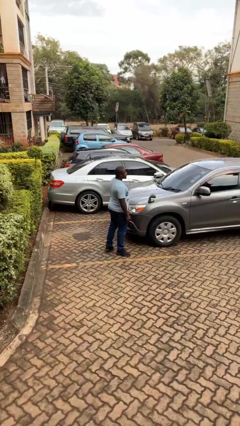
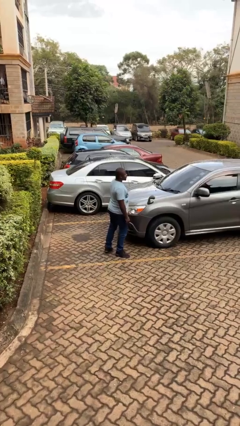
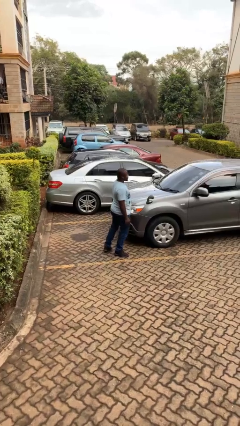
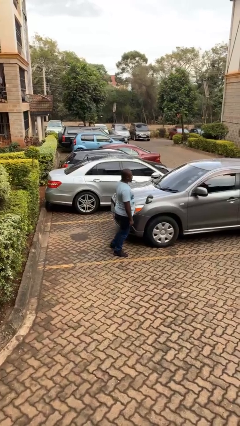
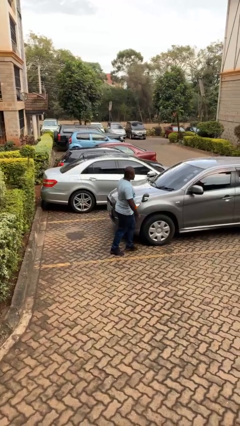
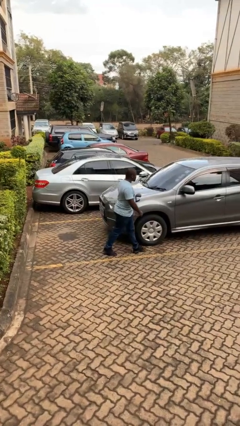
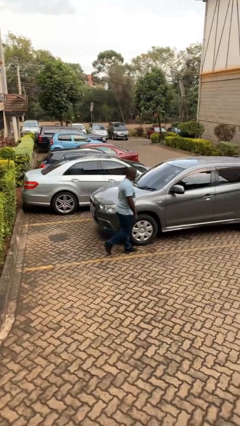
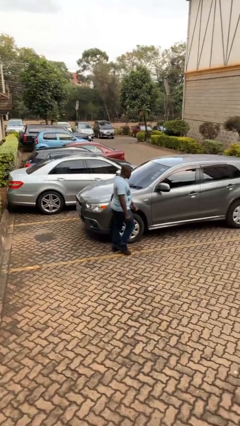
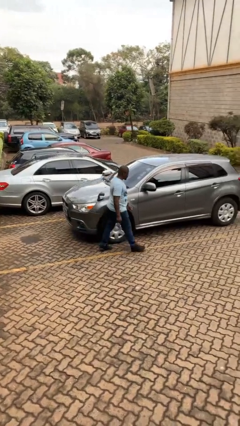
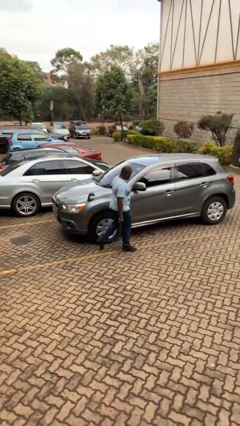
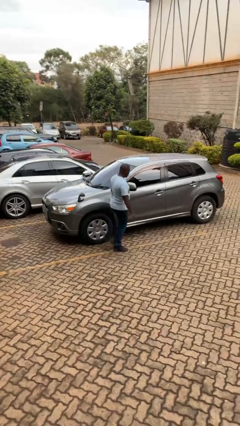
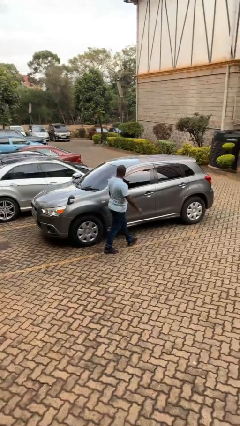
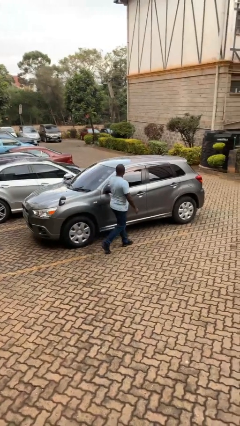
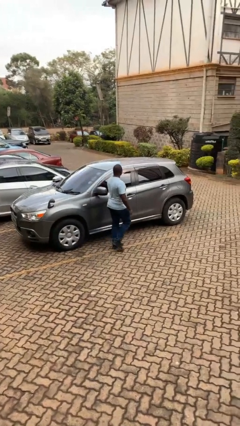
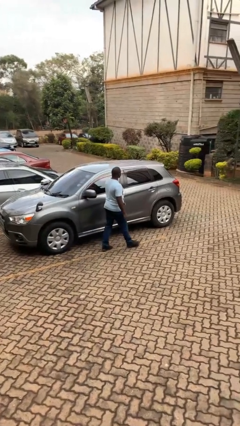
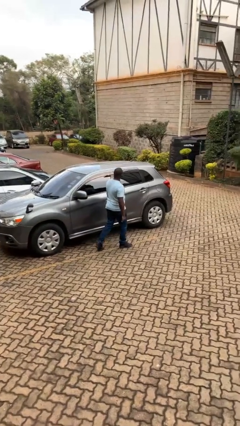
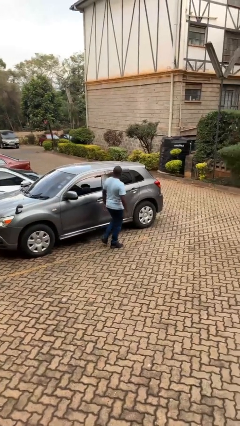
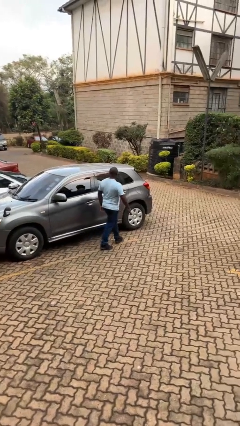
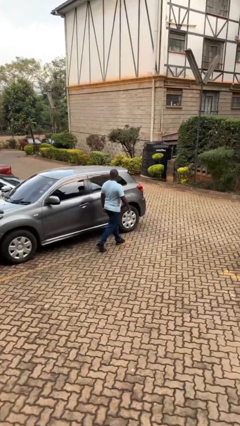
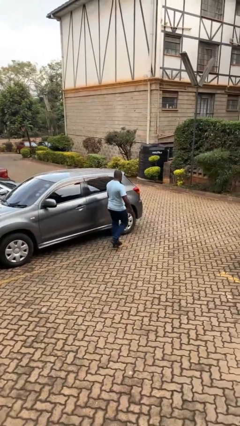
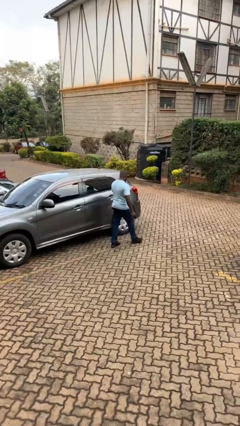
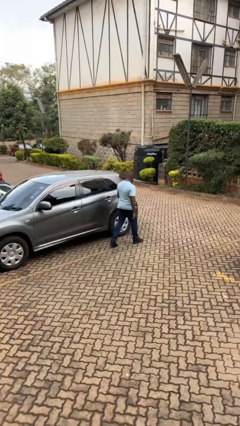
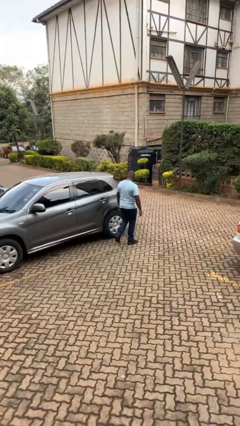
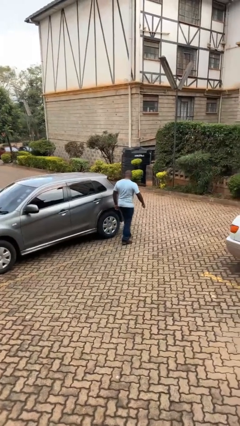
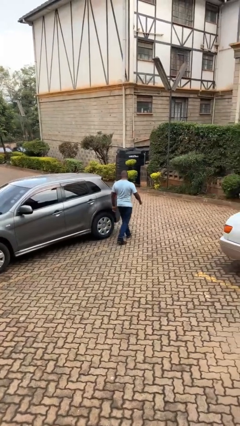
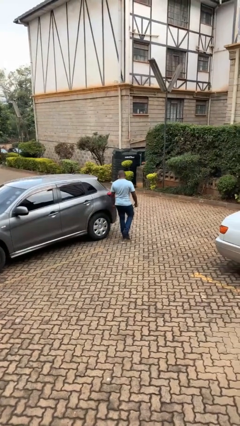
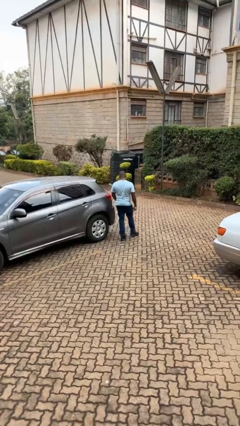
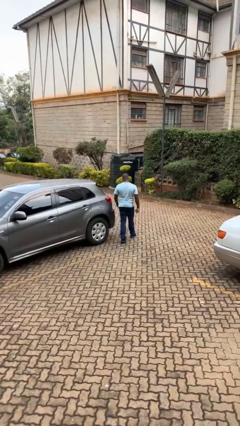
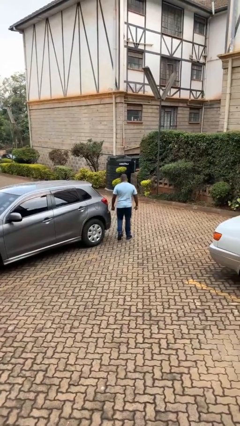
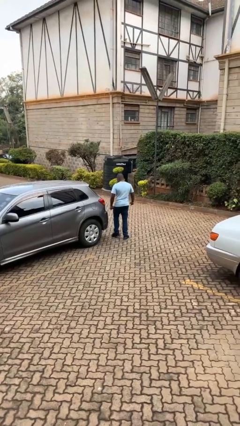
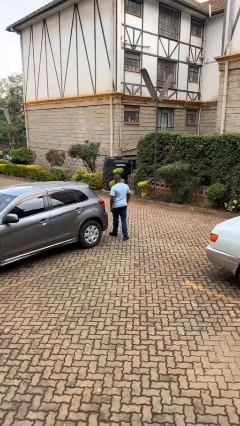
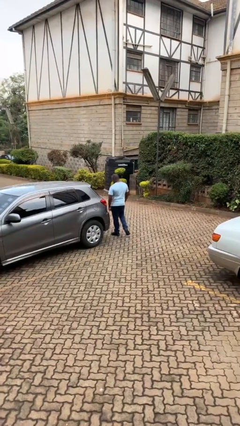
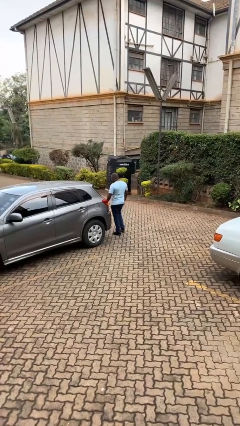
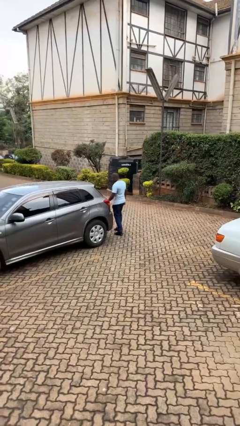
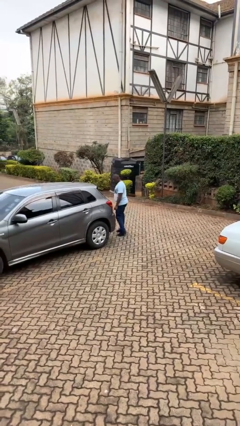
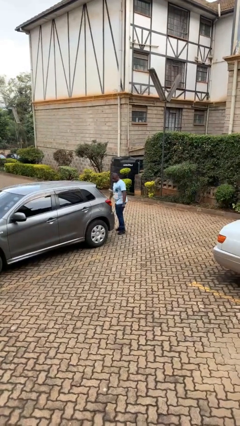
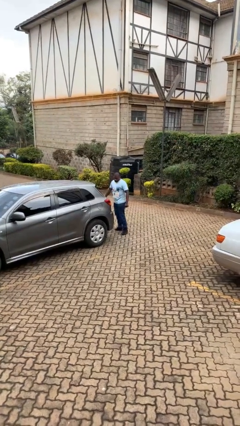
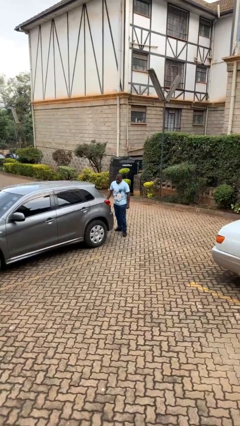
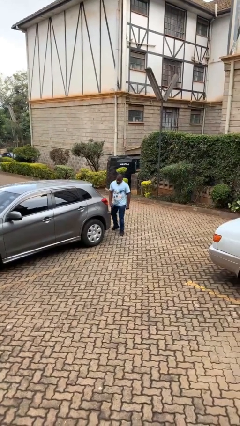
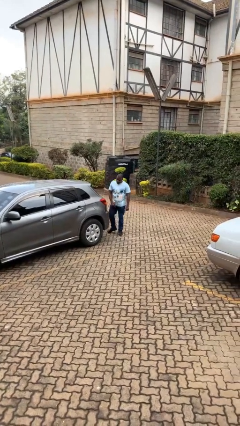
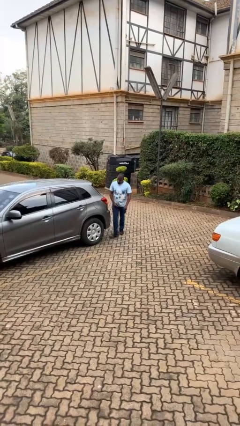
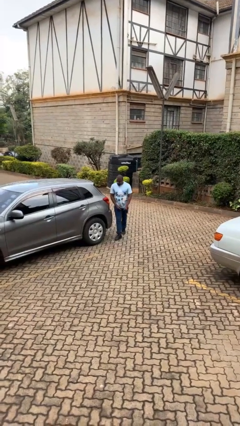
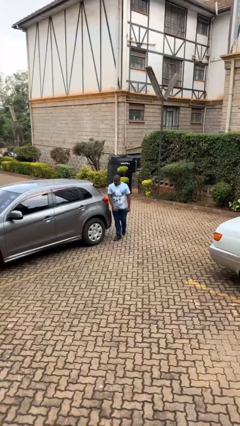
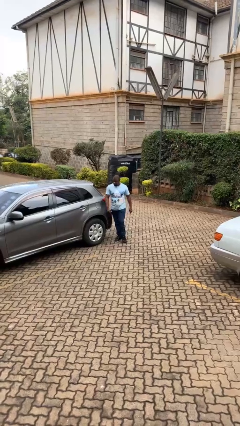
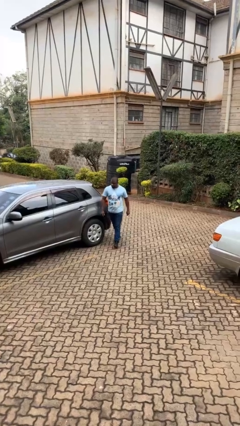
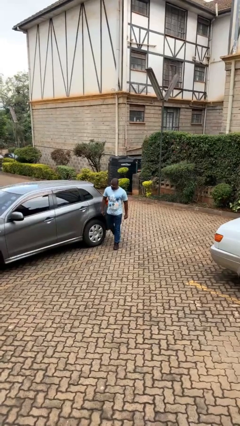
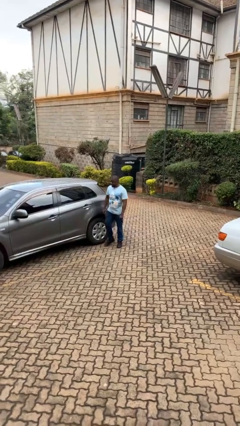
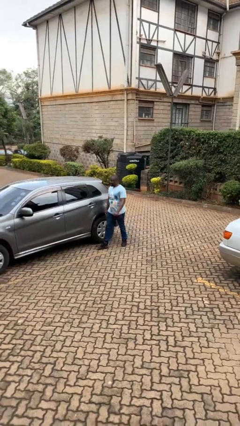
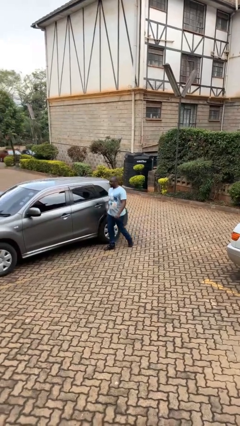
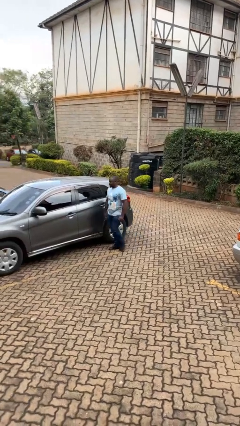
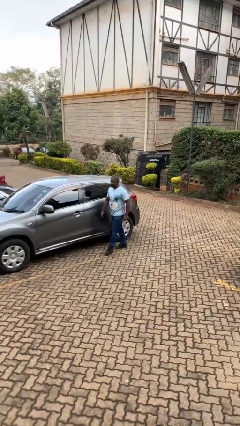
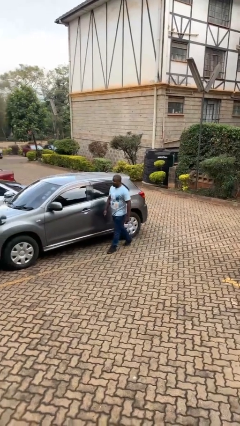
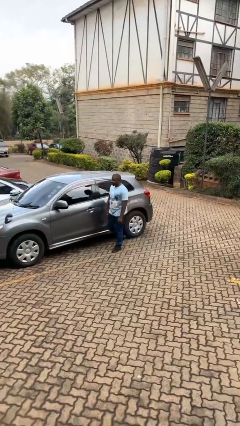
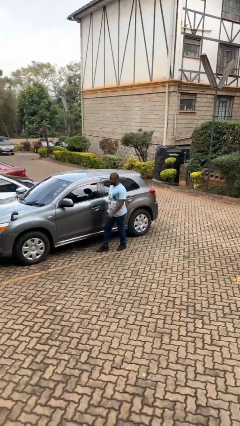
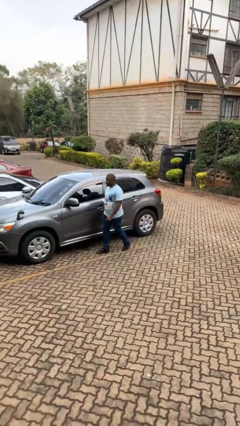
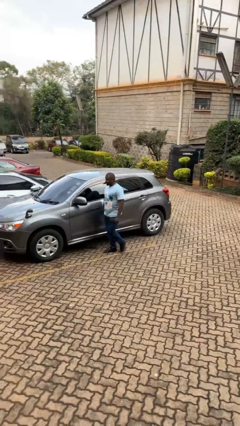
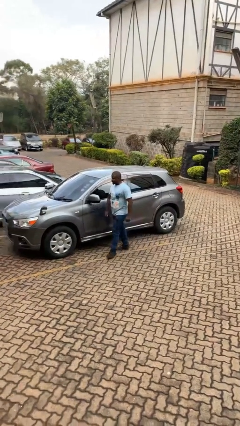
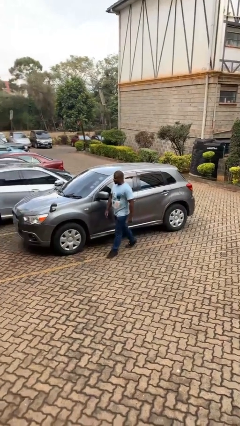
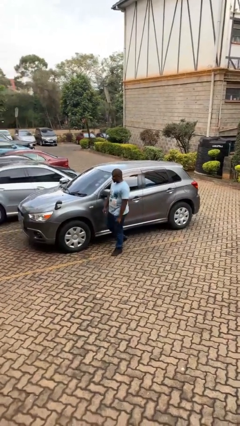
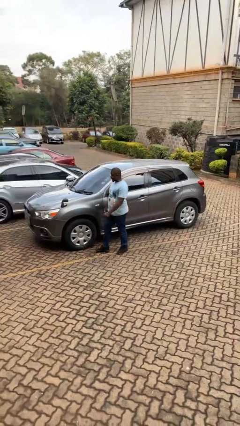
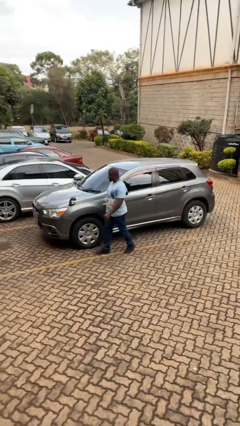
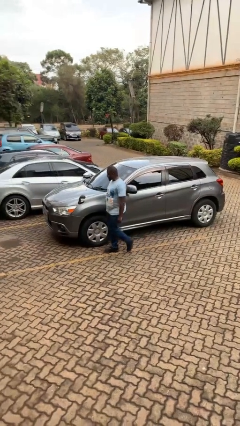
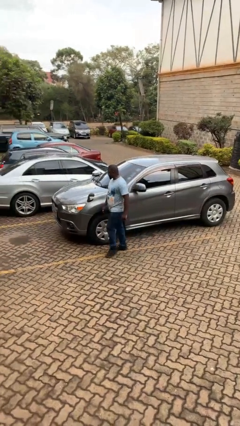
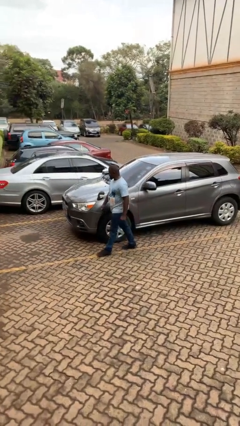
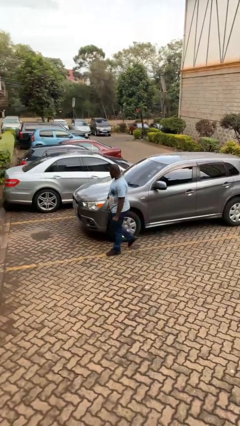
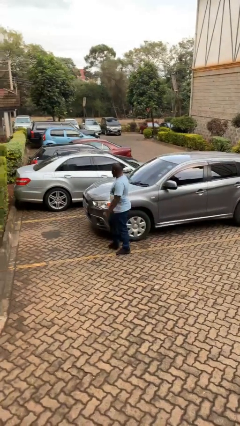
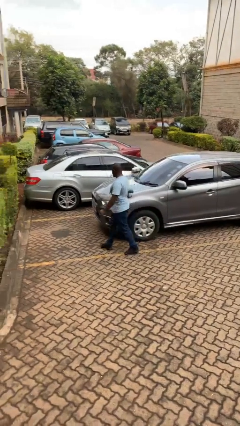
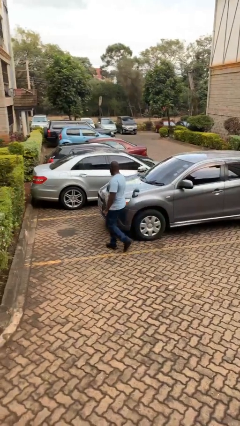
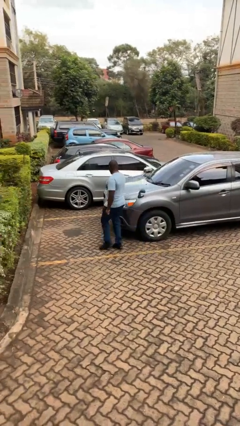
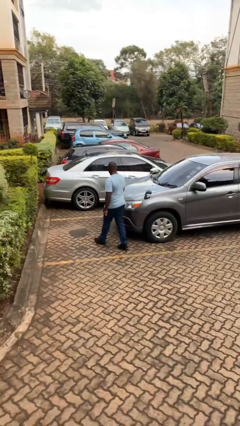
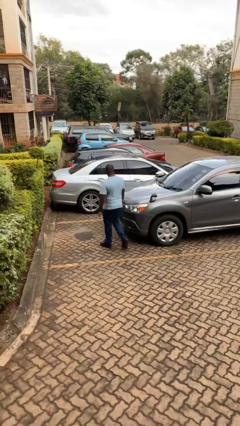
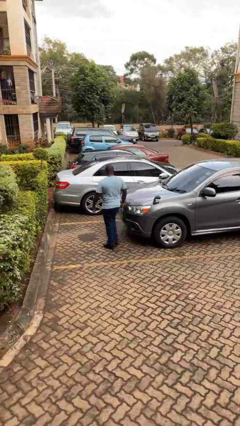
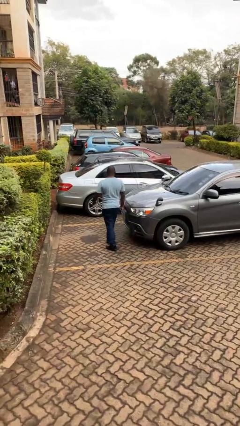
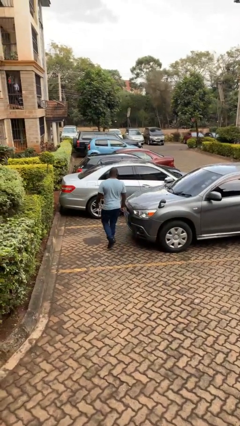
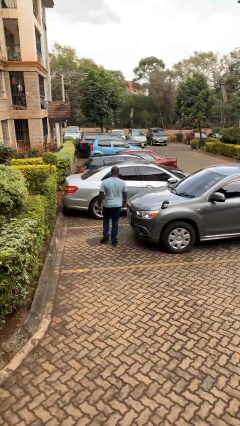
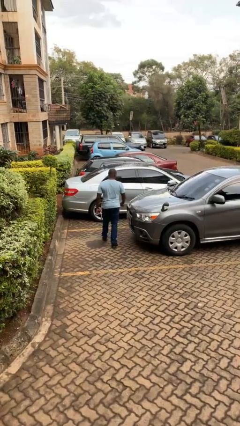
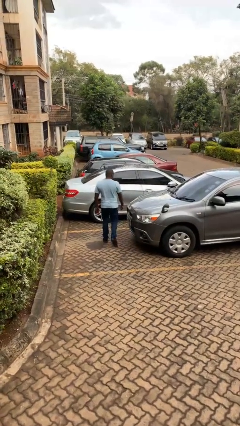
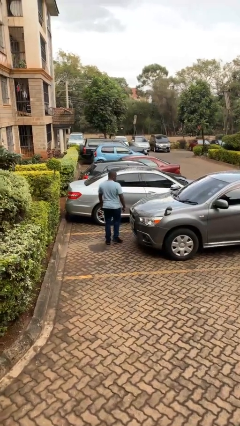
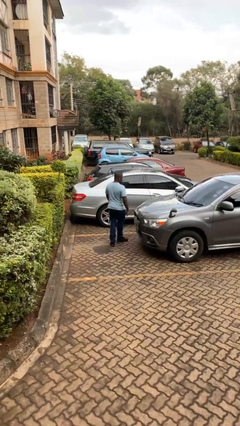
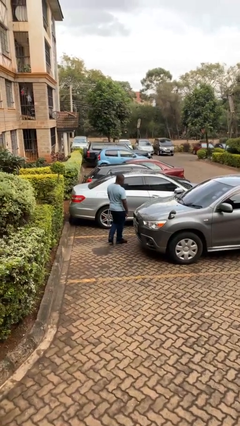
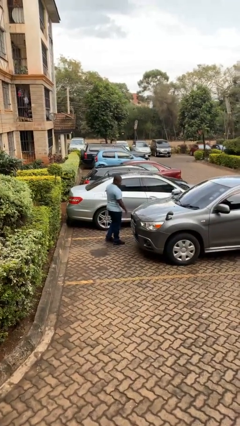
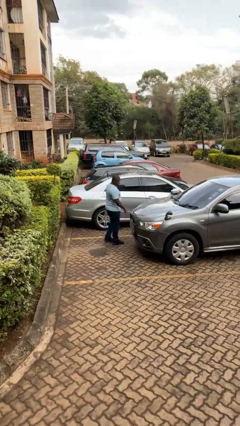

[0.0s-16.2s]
person walks around car

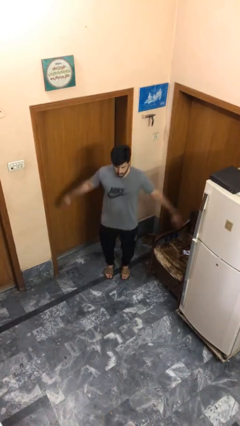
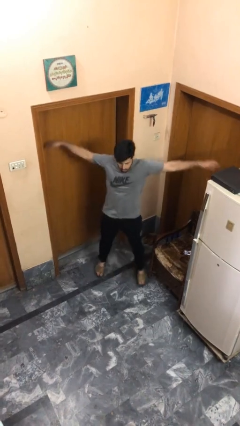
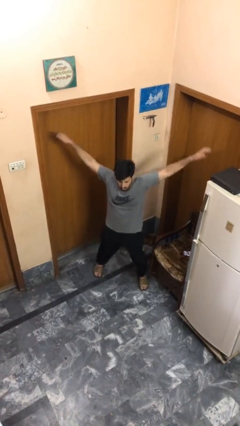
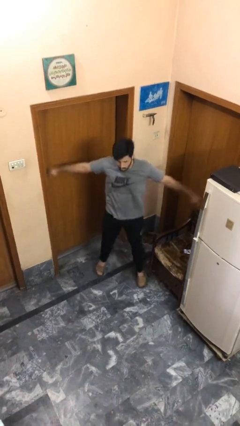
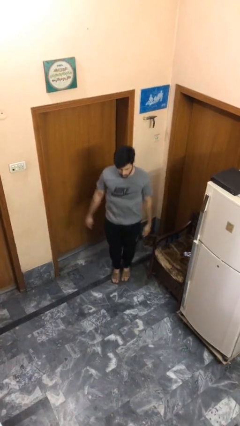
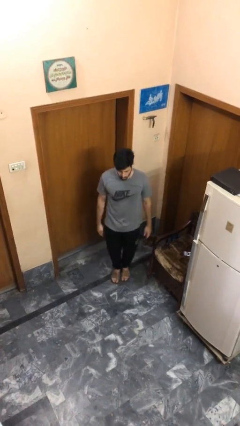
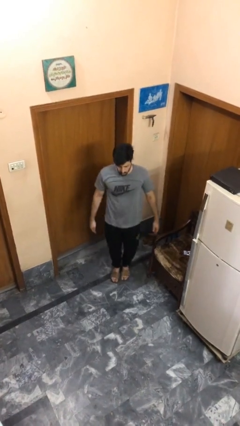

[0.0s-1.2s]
person exercises with jumping jacks

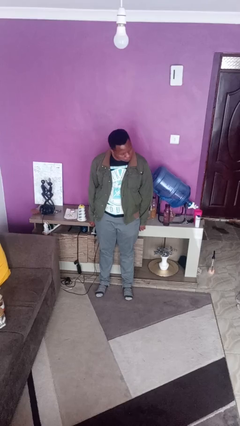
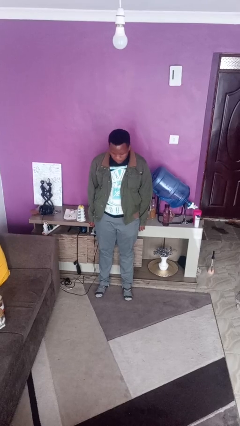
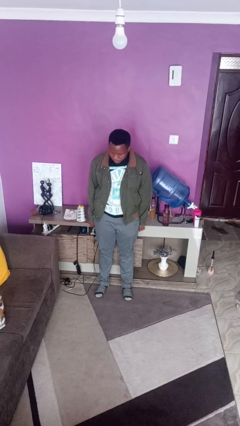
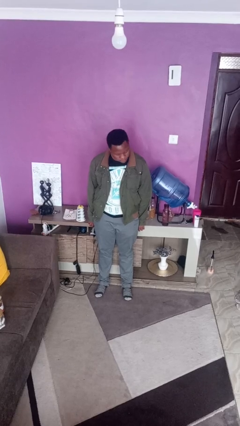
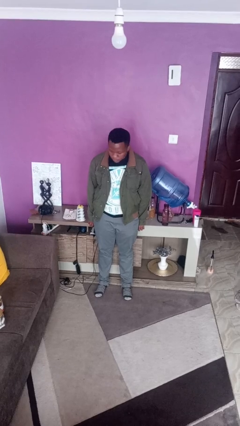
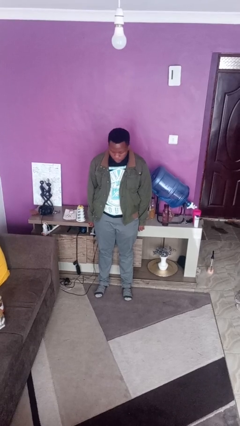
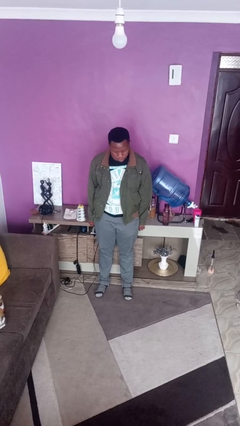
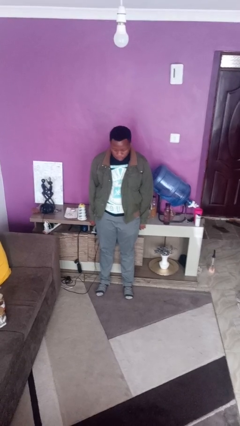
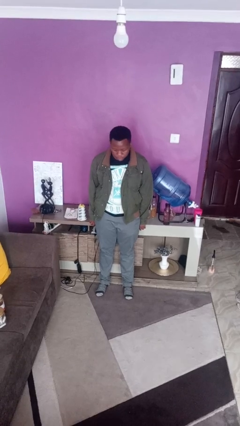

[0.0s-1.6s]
person shakes head
